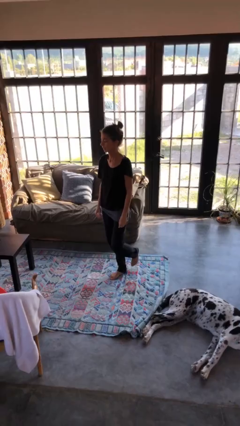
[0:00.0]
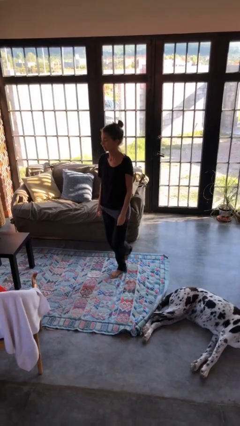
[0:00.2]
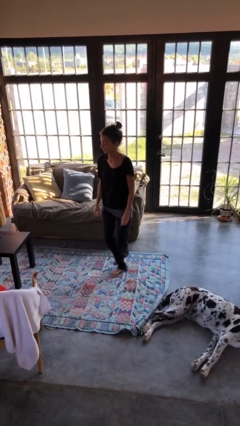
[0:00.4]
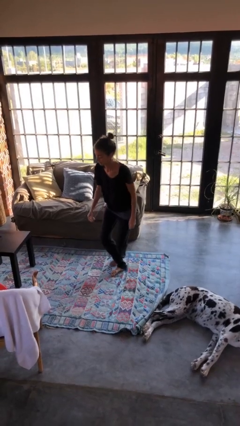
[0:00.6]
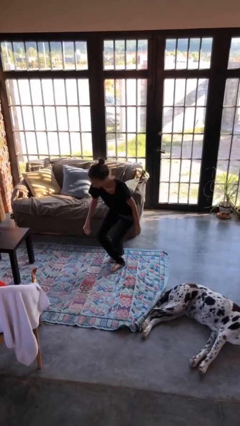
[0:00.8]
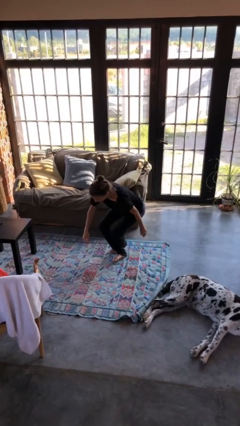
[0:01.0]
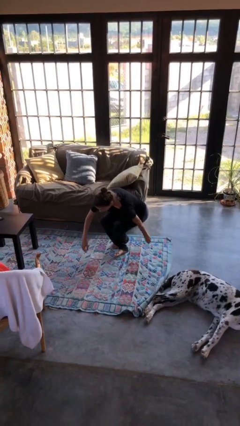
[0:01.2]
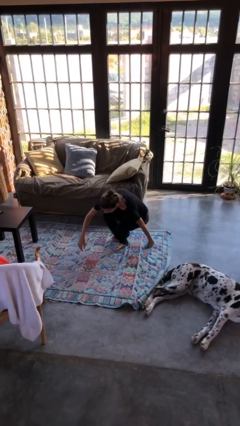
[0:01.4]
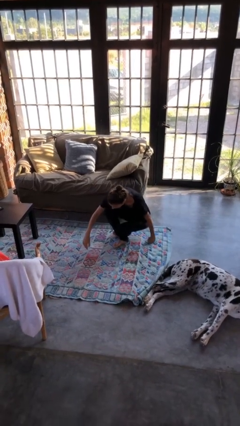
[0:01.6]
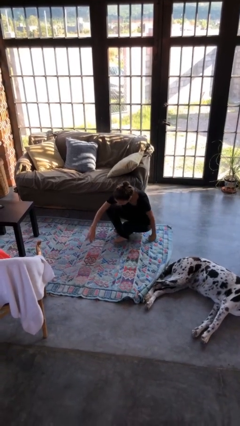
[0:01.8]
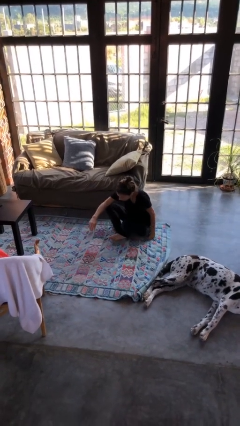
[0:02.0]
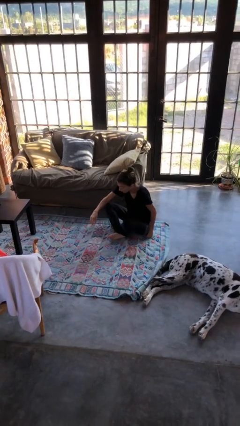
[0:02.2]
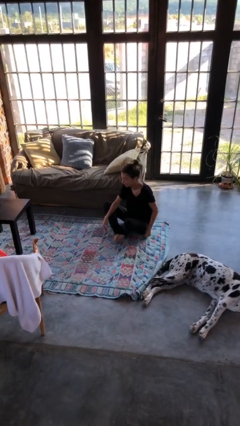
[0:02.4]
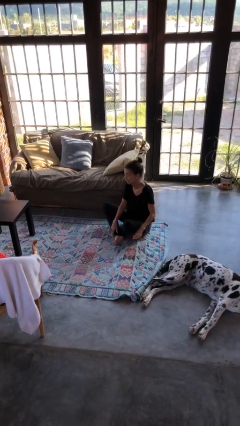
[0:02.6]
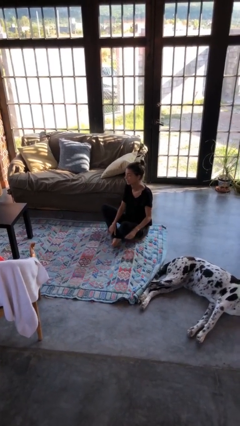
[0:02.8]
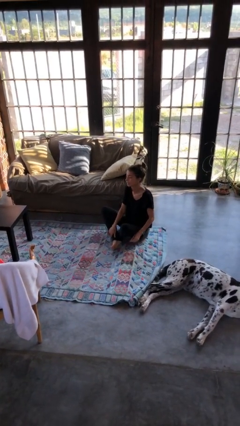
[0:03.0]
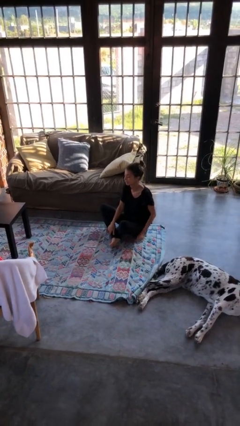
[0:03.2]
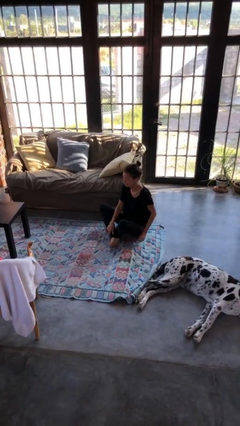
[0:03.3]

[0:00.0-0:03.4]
person sits crisscross

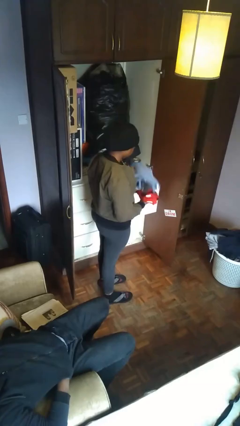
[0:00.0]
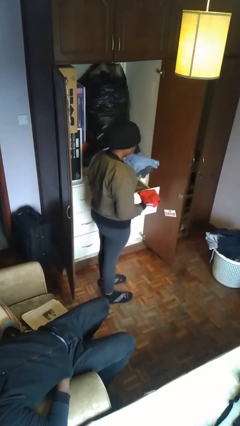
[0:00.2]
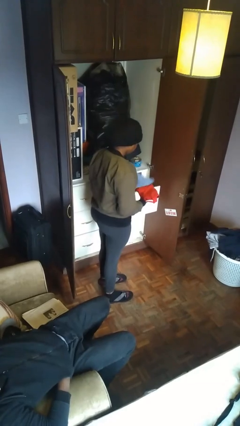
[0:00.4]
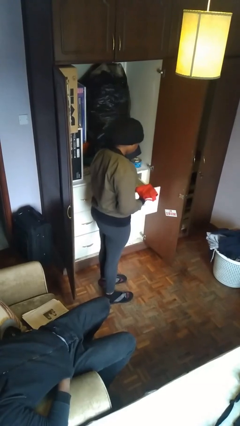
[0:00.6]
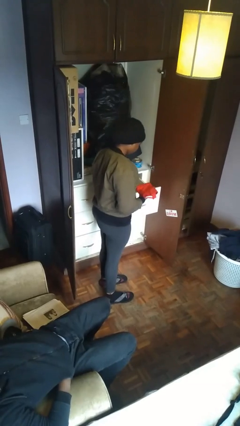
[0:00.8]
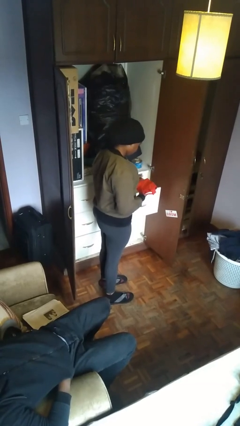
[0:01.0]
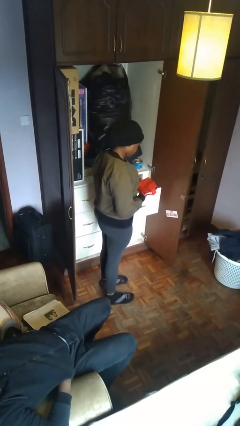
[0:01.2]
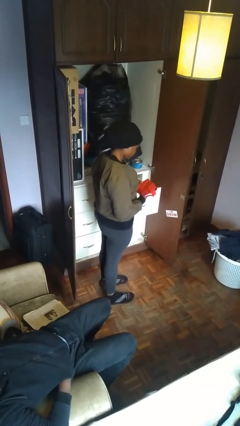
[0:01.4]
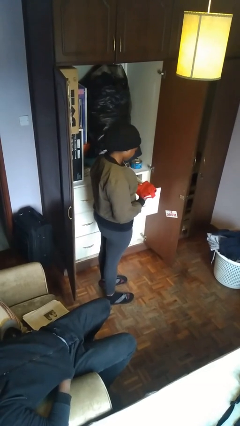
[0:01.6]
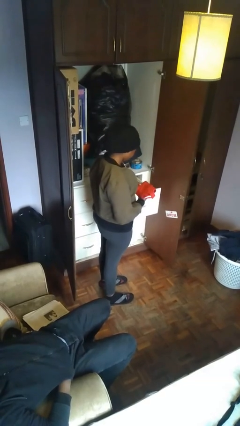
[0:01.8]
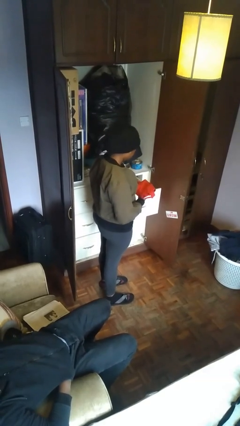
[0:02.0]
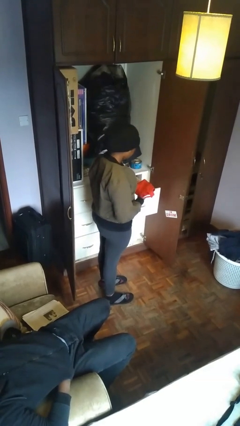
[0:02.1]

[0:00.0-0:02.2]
person puts clothes into dresser

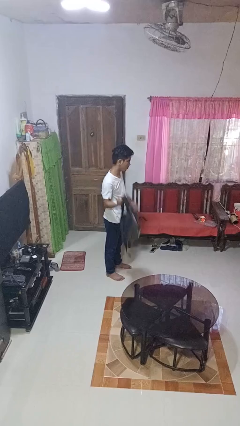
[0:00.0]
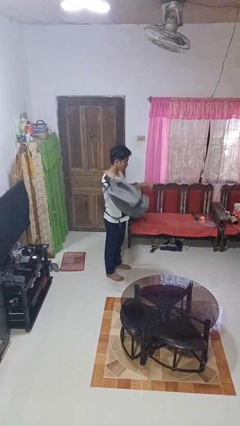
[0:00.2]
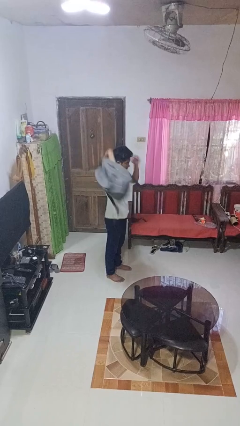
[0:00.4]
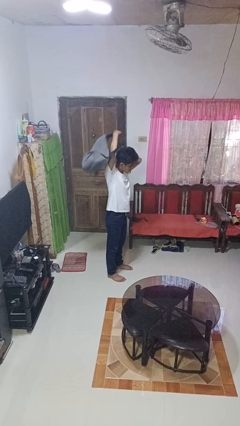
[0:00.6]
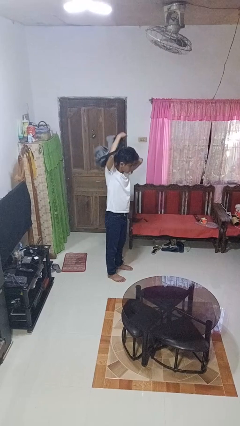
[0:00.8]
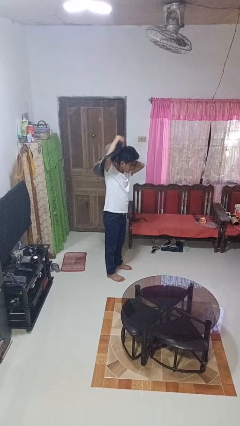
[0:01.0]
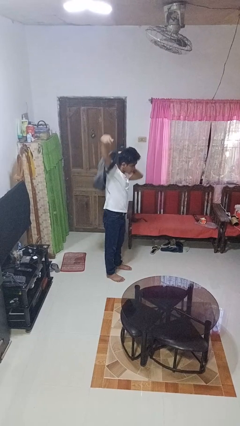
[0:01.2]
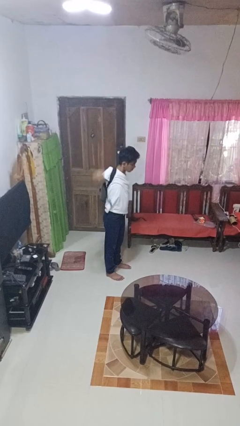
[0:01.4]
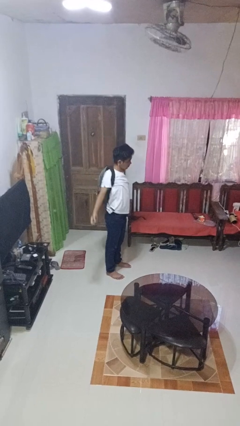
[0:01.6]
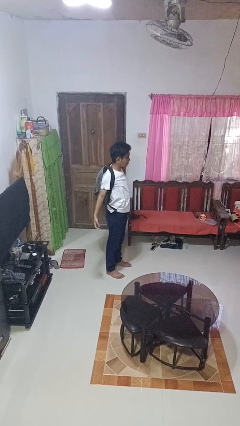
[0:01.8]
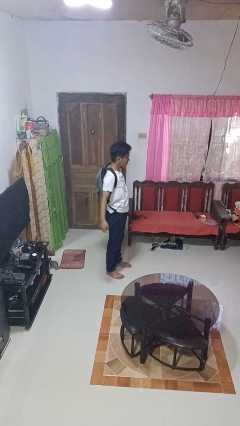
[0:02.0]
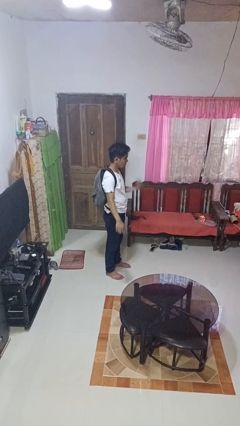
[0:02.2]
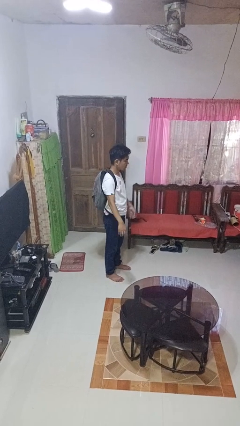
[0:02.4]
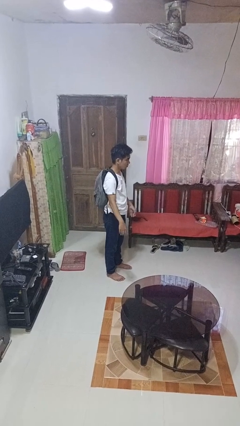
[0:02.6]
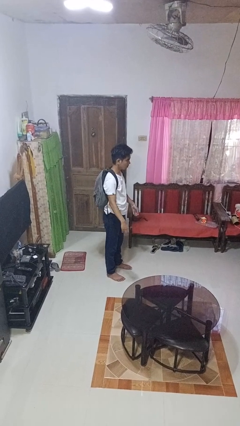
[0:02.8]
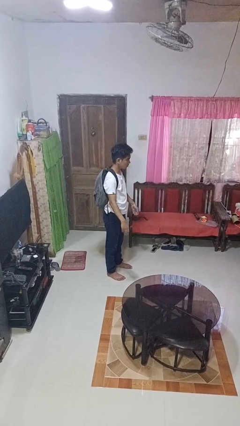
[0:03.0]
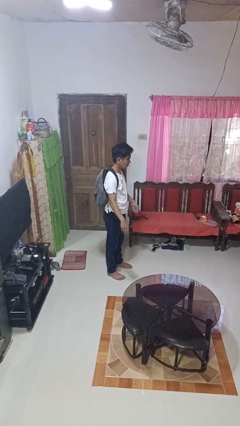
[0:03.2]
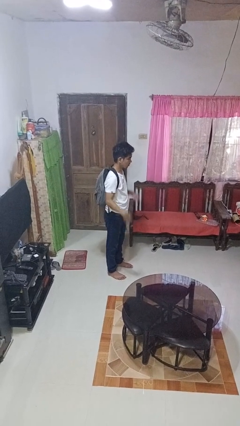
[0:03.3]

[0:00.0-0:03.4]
person puts on backpack

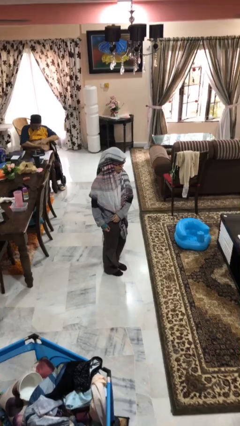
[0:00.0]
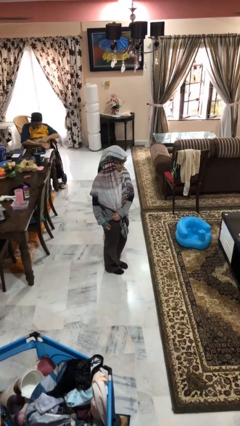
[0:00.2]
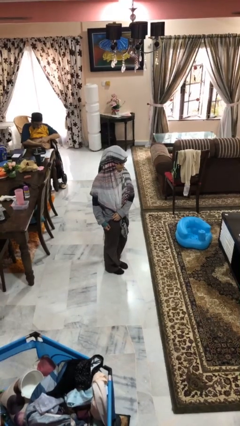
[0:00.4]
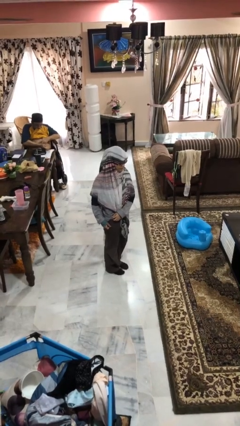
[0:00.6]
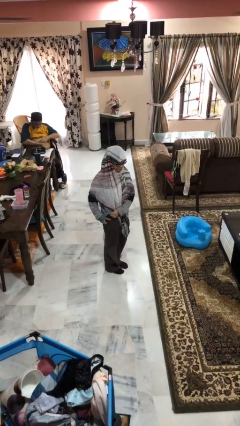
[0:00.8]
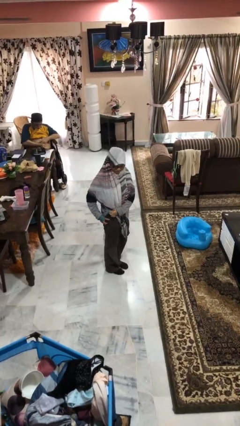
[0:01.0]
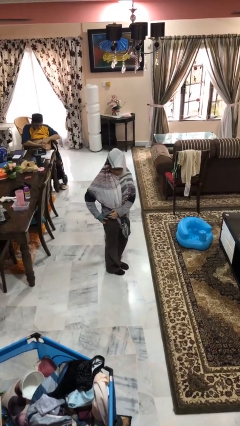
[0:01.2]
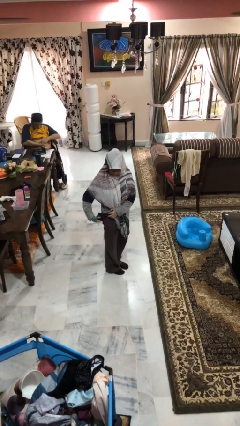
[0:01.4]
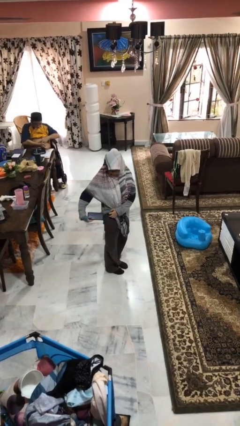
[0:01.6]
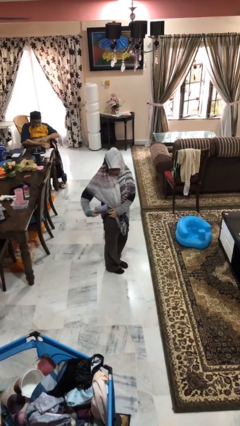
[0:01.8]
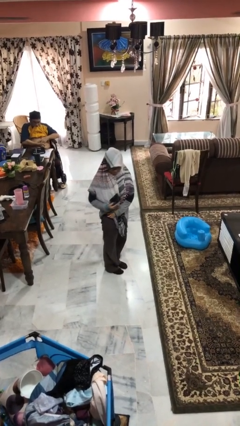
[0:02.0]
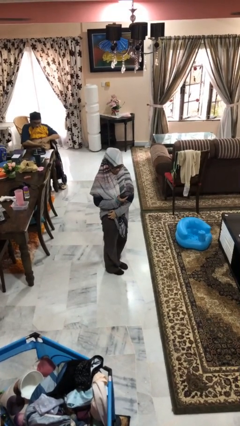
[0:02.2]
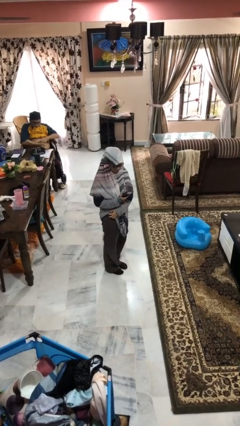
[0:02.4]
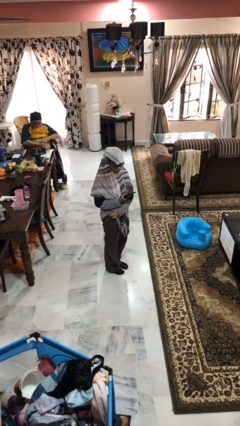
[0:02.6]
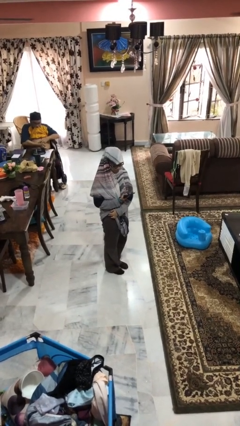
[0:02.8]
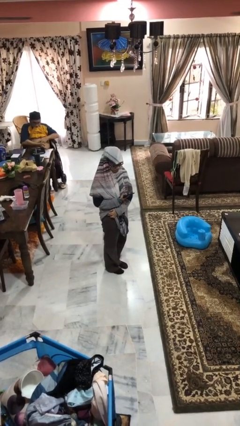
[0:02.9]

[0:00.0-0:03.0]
person takes phone from pocket

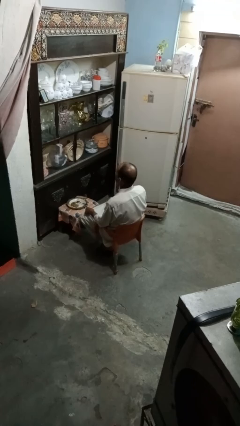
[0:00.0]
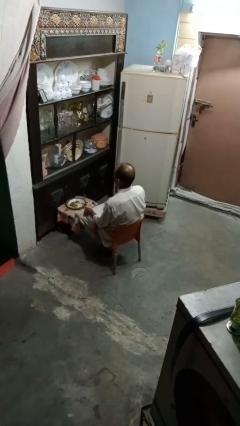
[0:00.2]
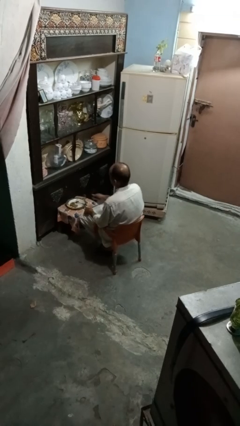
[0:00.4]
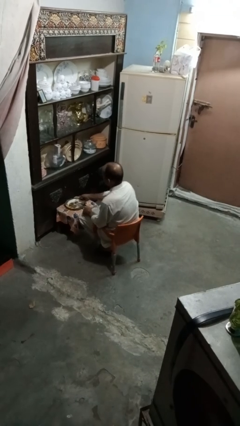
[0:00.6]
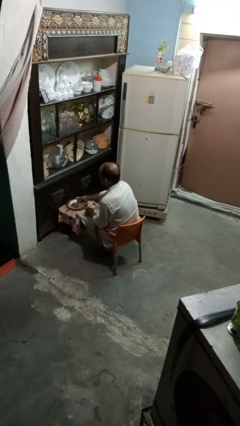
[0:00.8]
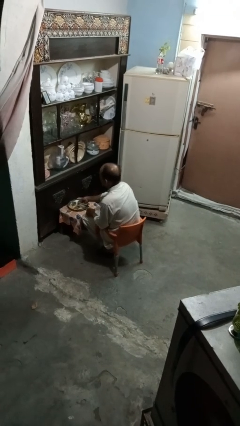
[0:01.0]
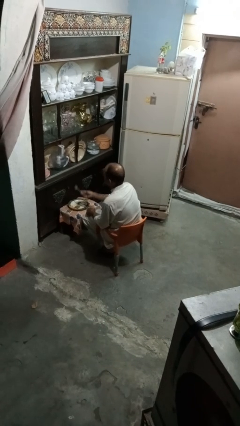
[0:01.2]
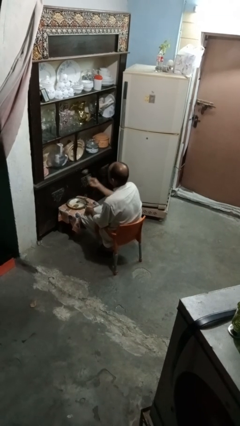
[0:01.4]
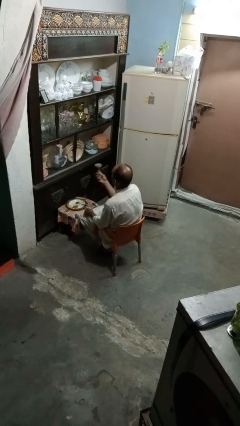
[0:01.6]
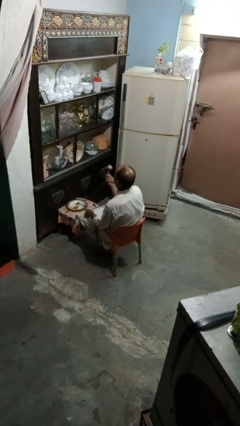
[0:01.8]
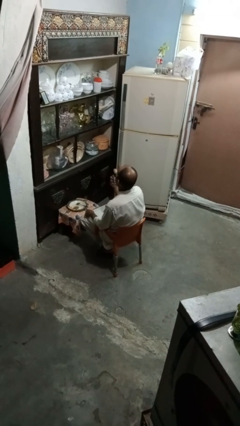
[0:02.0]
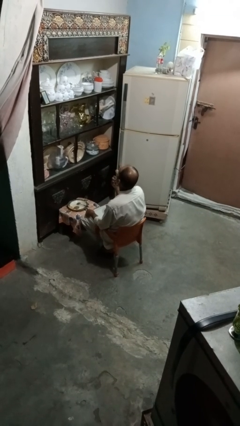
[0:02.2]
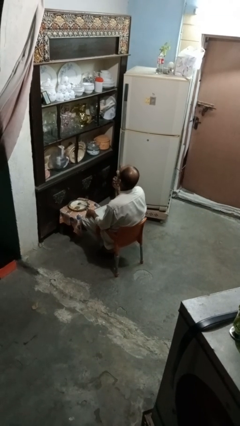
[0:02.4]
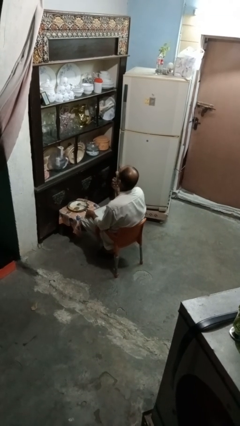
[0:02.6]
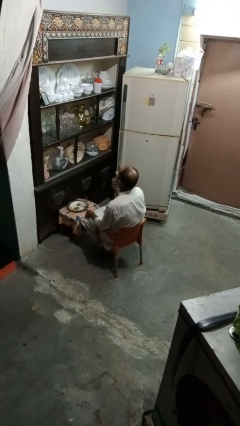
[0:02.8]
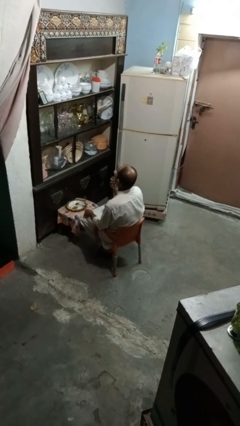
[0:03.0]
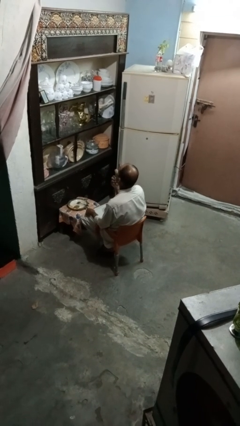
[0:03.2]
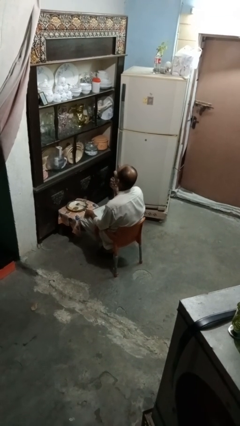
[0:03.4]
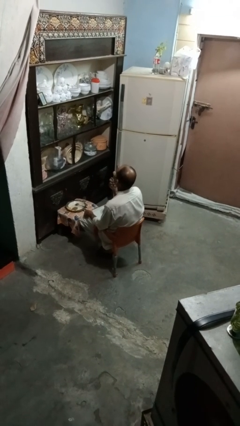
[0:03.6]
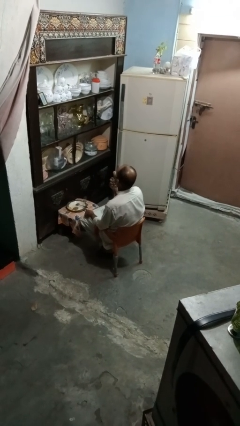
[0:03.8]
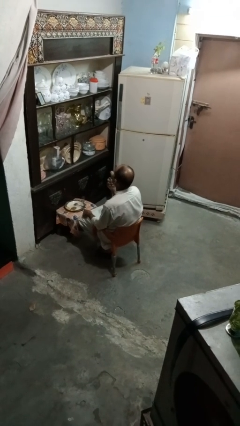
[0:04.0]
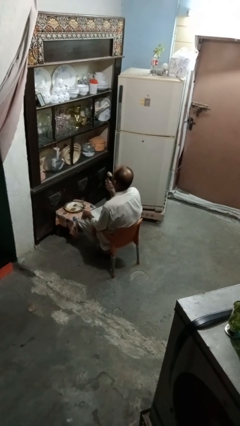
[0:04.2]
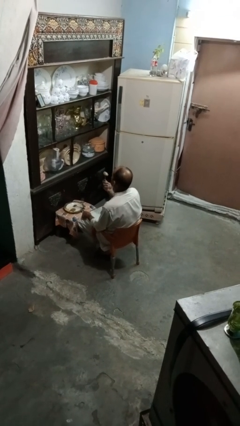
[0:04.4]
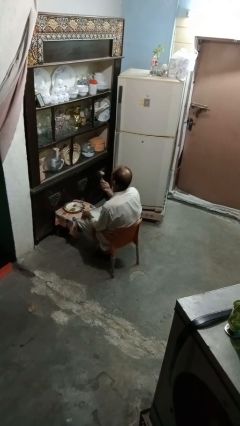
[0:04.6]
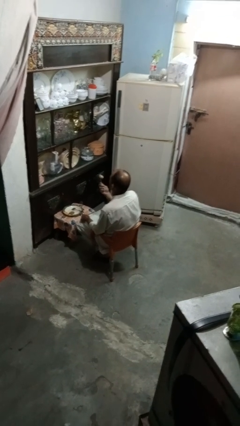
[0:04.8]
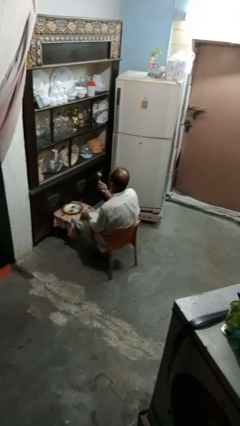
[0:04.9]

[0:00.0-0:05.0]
person eats with utensil

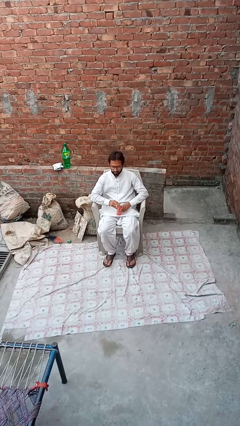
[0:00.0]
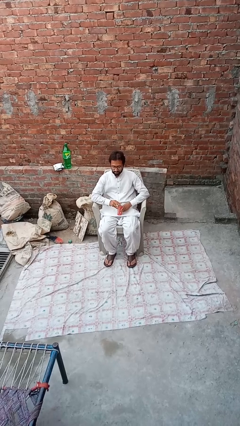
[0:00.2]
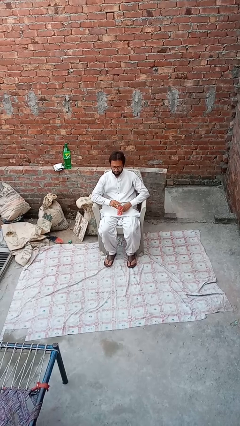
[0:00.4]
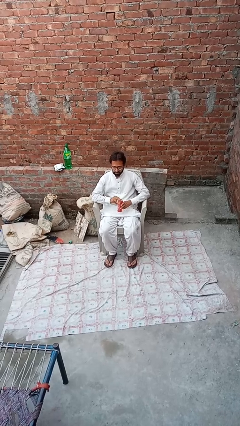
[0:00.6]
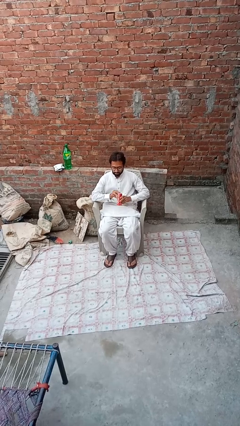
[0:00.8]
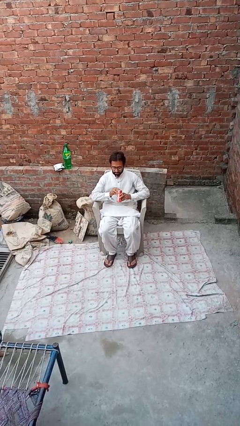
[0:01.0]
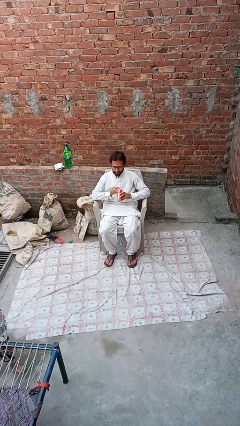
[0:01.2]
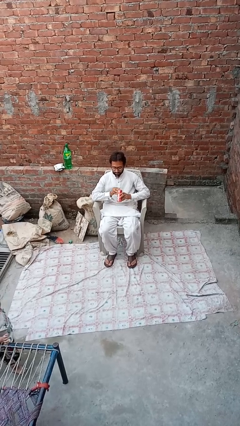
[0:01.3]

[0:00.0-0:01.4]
person drinks from straw
